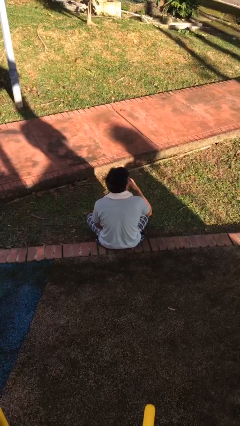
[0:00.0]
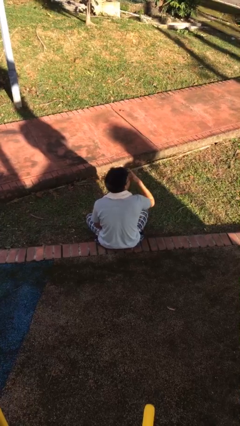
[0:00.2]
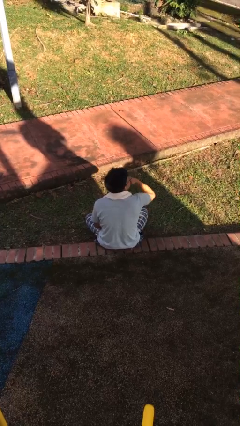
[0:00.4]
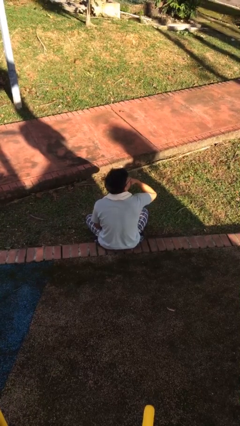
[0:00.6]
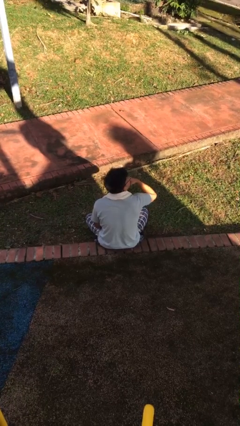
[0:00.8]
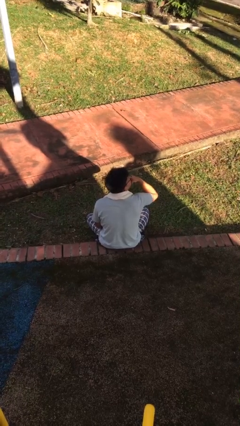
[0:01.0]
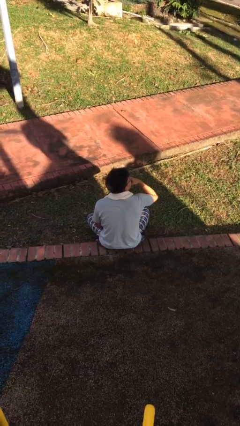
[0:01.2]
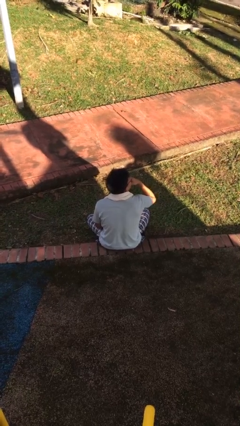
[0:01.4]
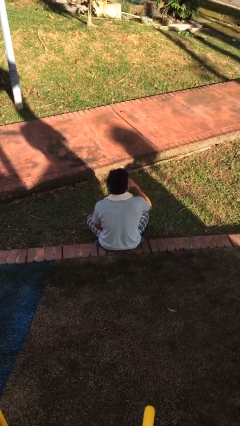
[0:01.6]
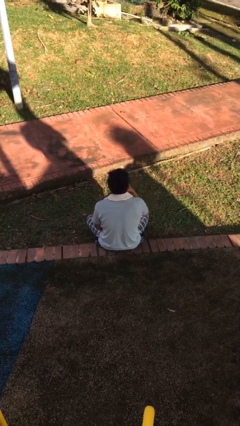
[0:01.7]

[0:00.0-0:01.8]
person strokes chin

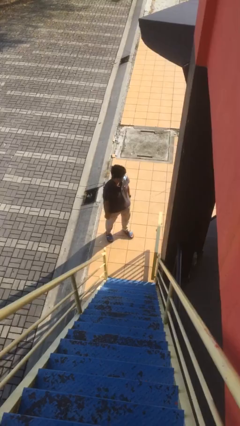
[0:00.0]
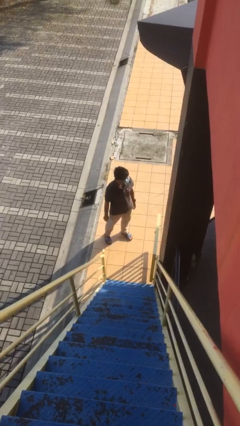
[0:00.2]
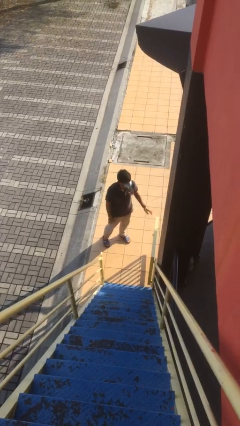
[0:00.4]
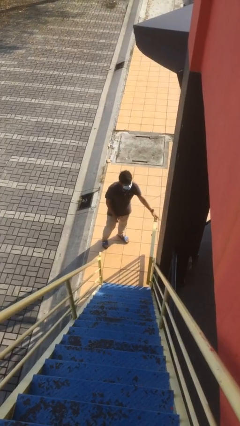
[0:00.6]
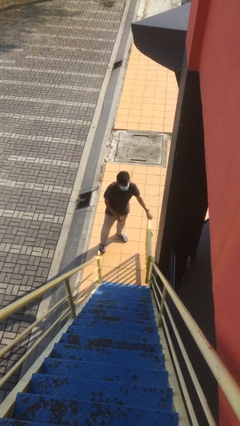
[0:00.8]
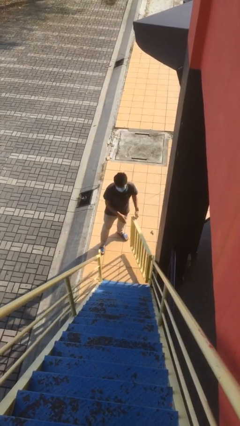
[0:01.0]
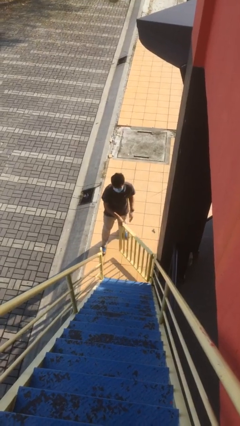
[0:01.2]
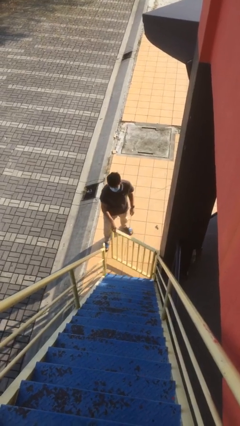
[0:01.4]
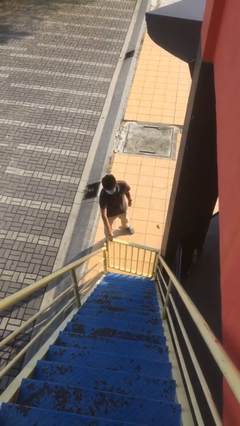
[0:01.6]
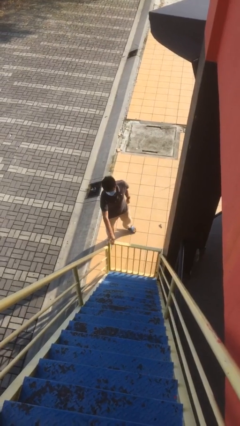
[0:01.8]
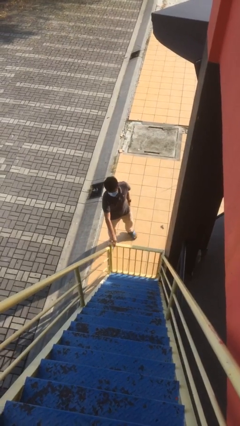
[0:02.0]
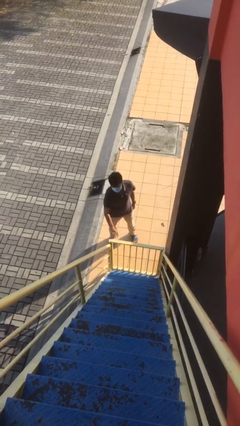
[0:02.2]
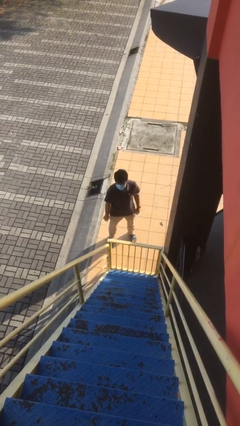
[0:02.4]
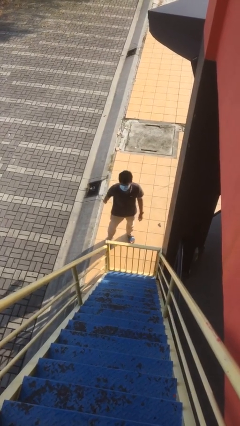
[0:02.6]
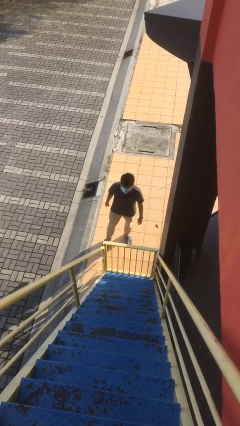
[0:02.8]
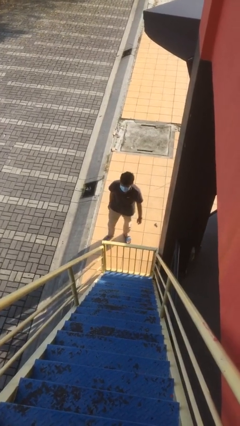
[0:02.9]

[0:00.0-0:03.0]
person closes facility door

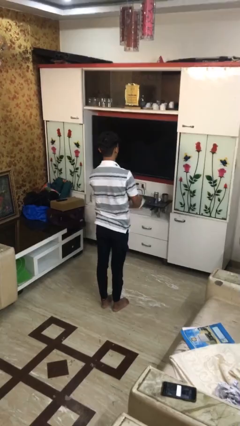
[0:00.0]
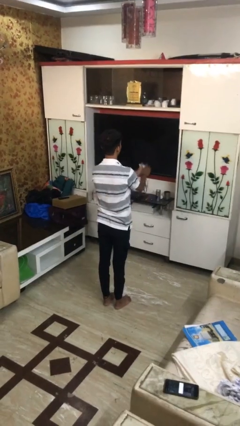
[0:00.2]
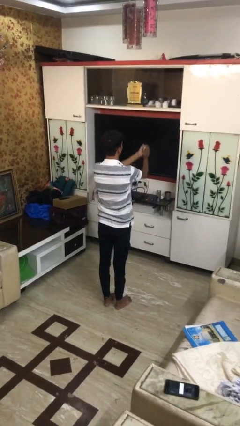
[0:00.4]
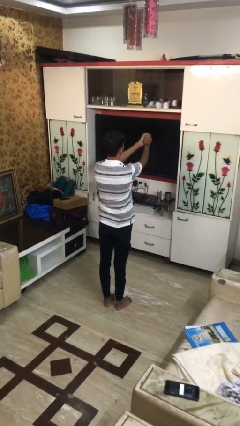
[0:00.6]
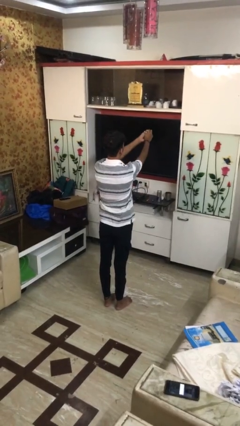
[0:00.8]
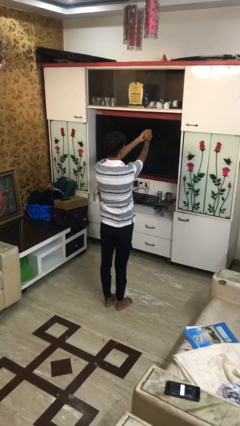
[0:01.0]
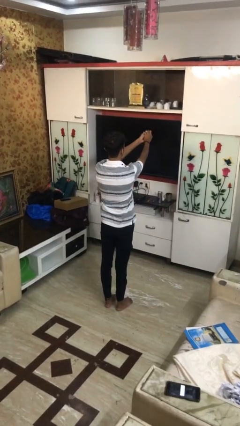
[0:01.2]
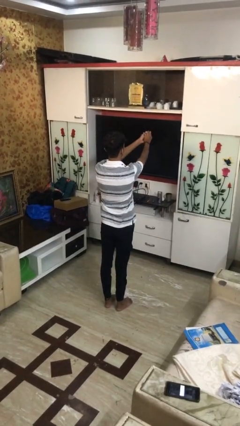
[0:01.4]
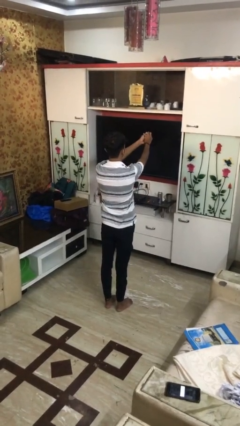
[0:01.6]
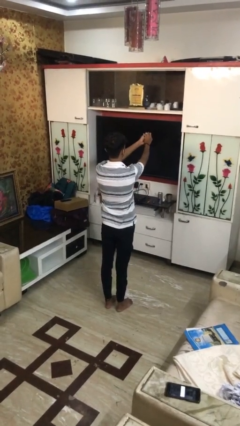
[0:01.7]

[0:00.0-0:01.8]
person crumples paper

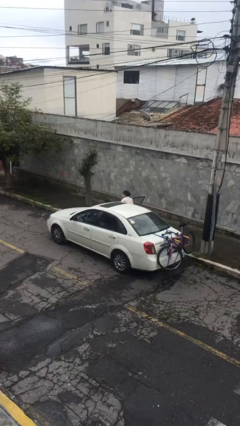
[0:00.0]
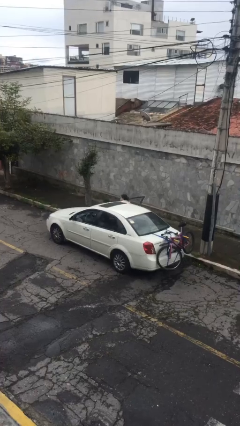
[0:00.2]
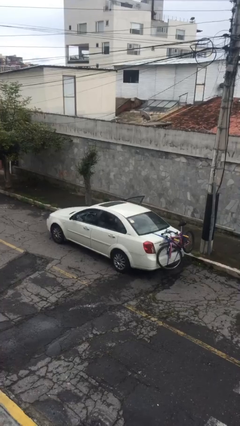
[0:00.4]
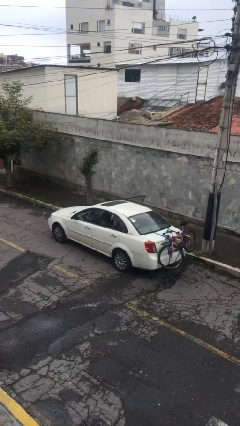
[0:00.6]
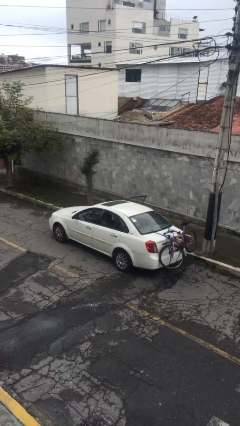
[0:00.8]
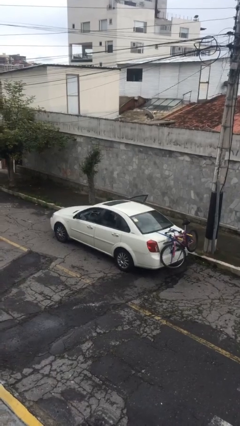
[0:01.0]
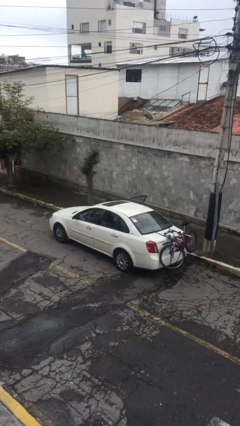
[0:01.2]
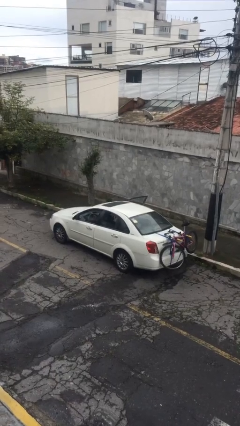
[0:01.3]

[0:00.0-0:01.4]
person enters car

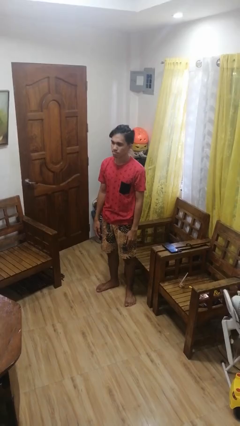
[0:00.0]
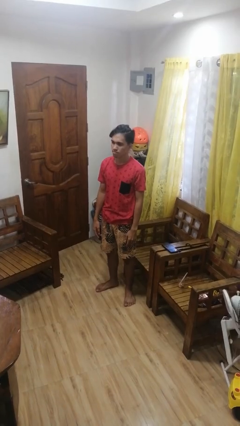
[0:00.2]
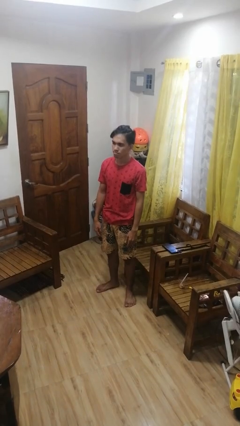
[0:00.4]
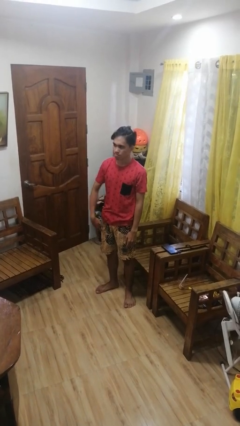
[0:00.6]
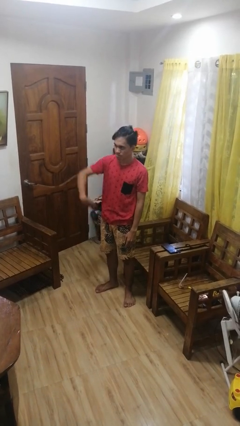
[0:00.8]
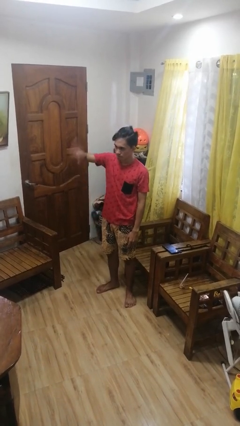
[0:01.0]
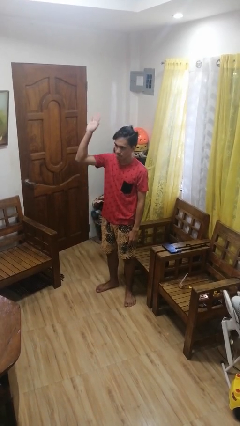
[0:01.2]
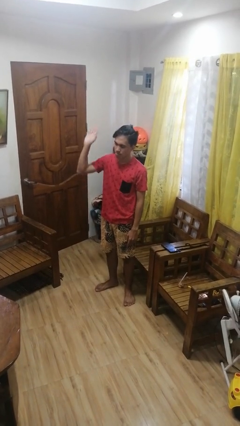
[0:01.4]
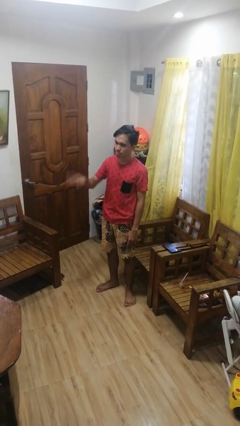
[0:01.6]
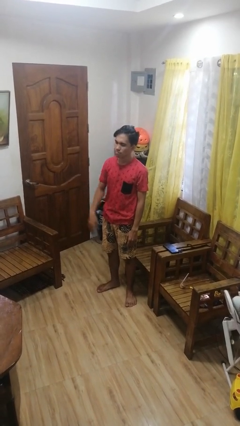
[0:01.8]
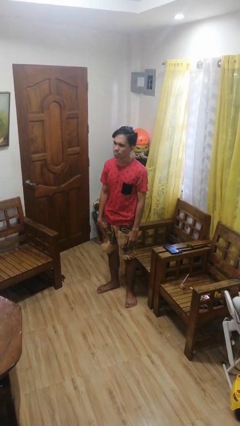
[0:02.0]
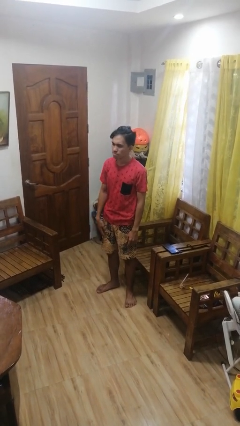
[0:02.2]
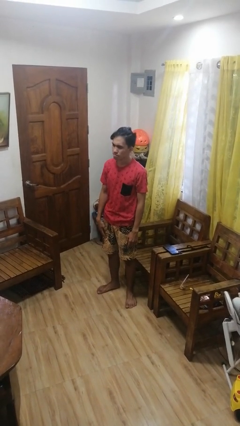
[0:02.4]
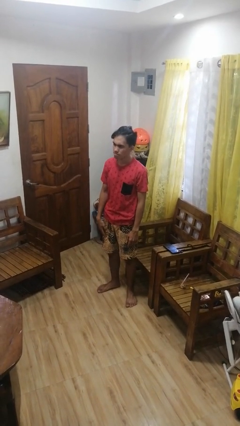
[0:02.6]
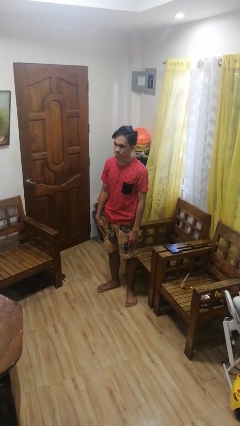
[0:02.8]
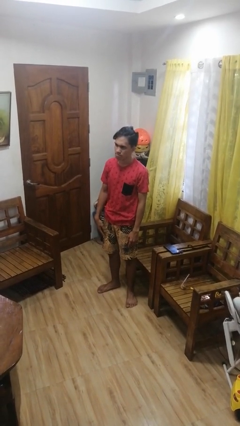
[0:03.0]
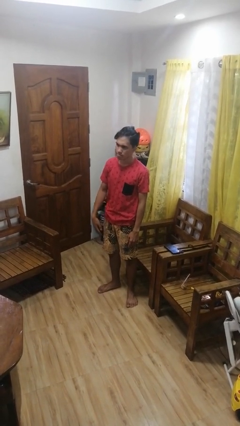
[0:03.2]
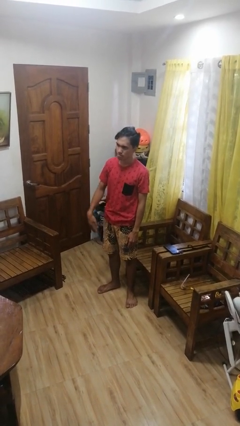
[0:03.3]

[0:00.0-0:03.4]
person gestures swipe up

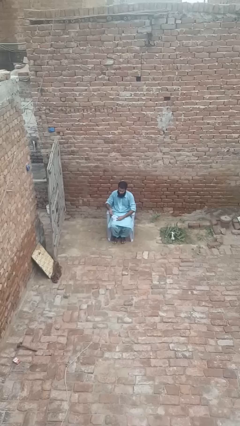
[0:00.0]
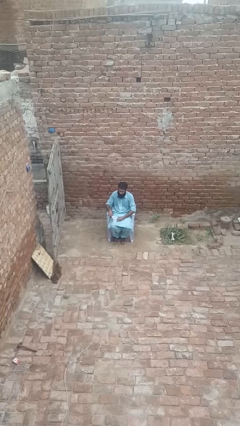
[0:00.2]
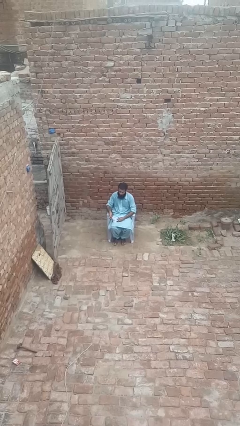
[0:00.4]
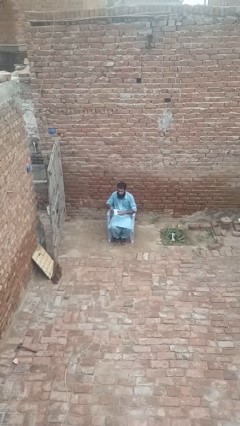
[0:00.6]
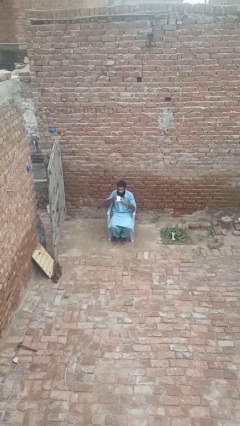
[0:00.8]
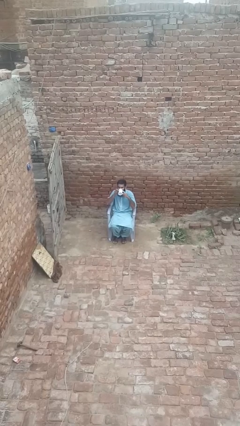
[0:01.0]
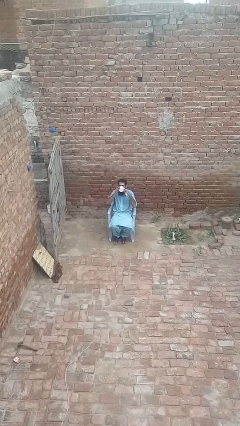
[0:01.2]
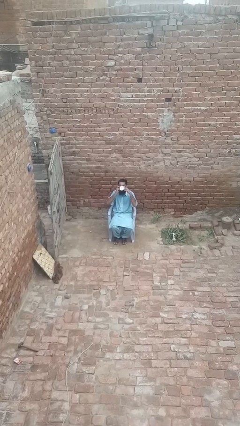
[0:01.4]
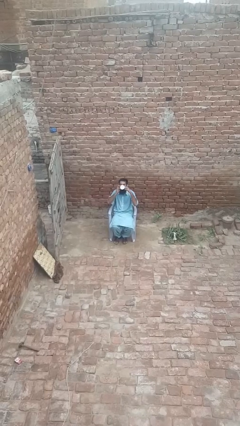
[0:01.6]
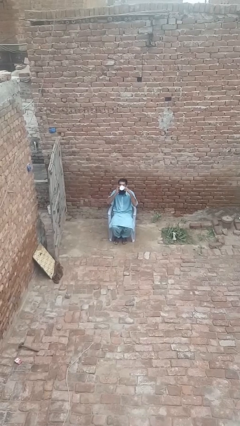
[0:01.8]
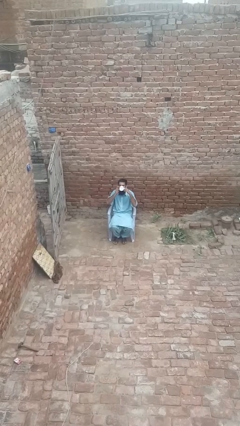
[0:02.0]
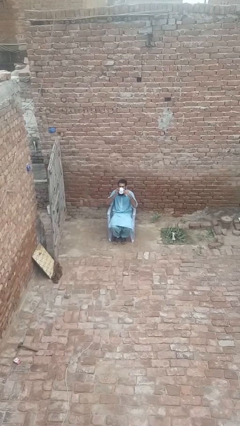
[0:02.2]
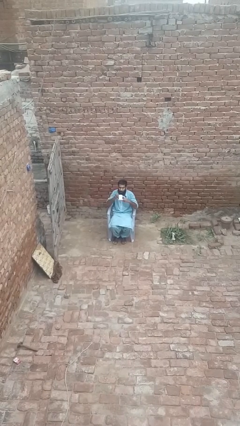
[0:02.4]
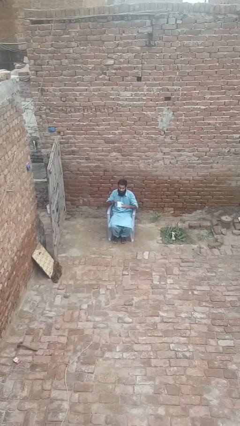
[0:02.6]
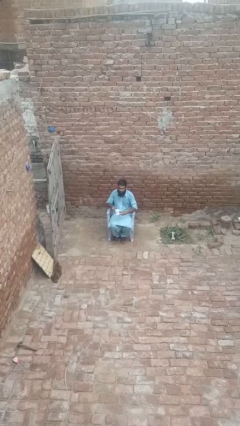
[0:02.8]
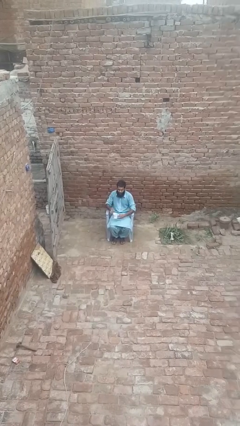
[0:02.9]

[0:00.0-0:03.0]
person drinks from mug

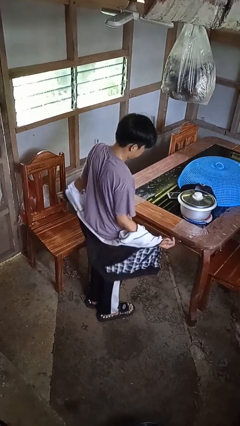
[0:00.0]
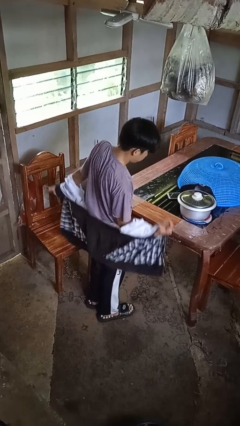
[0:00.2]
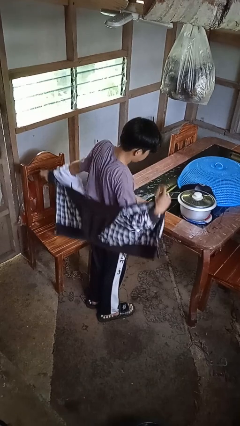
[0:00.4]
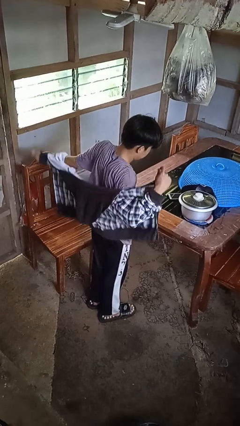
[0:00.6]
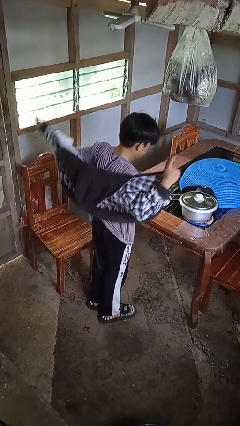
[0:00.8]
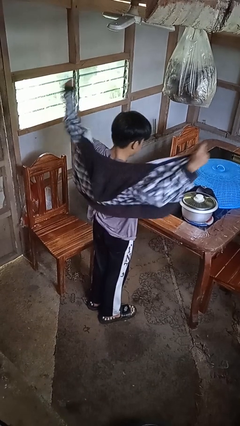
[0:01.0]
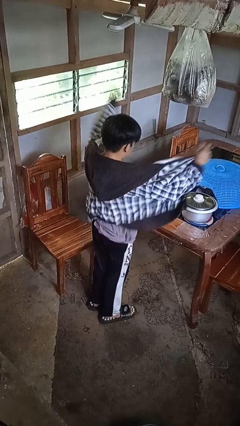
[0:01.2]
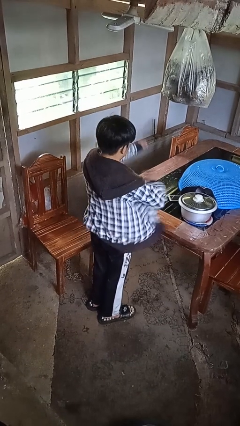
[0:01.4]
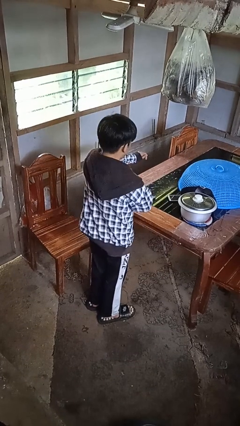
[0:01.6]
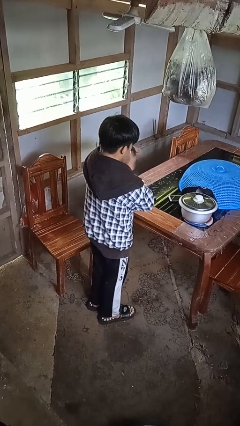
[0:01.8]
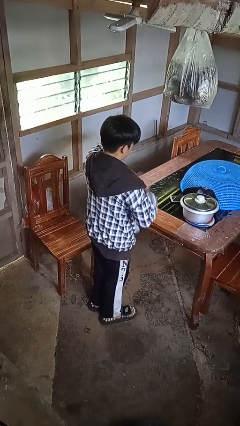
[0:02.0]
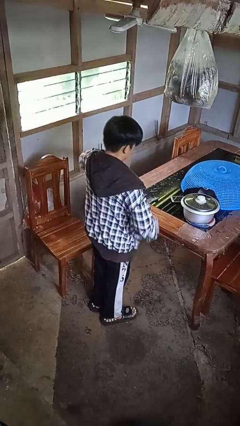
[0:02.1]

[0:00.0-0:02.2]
person puts on jacket

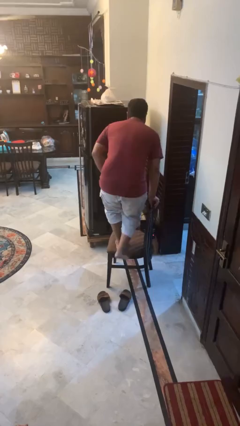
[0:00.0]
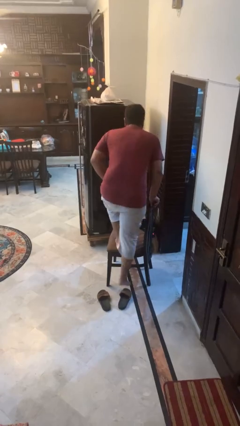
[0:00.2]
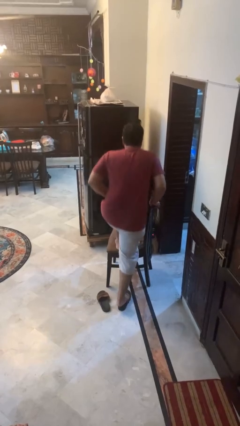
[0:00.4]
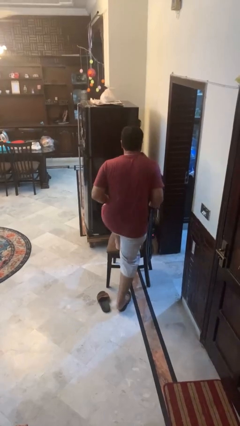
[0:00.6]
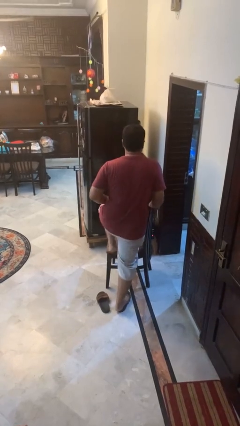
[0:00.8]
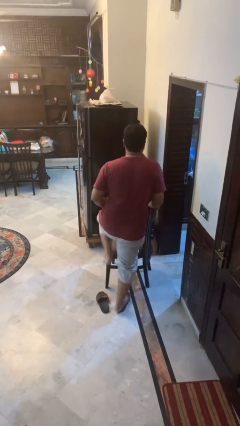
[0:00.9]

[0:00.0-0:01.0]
person climbs off chair
